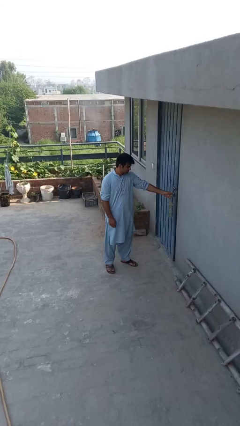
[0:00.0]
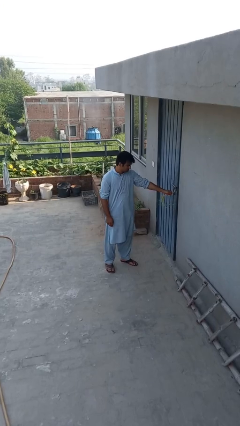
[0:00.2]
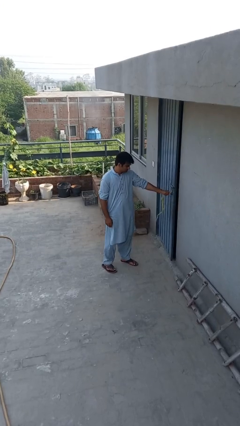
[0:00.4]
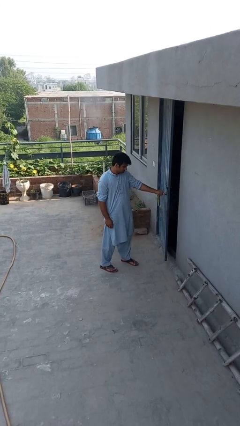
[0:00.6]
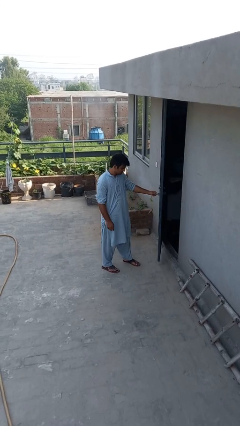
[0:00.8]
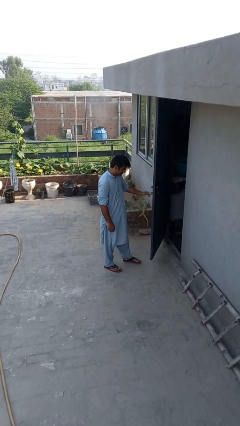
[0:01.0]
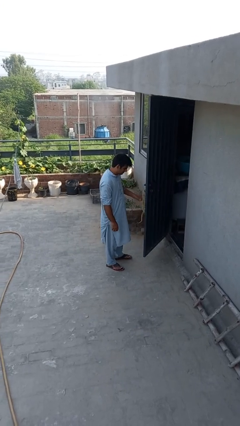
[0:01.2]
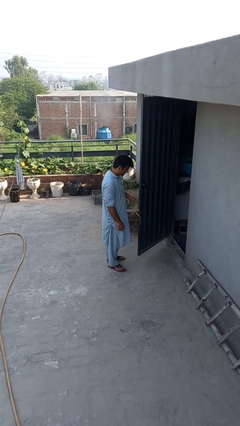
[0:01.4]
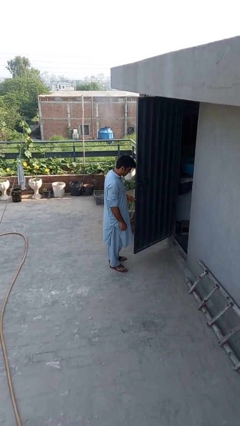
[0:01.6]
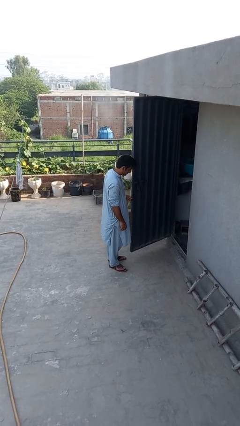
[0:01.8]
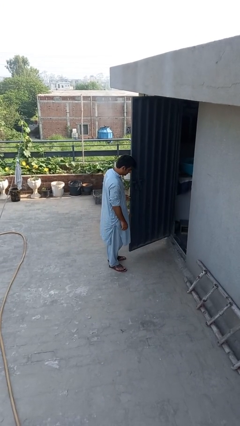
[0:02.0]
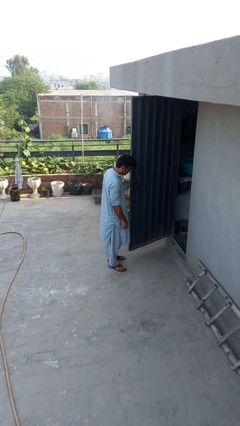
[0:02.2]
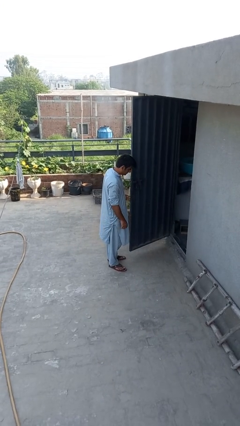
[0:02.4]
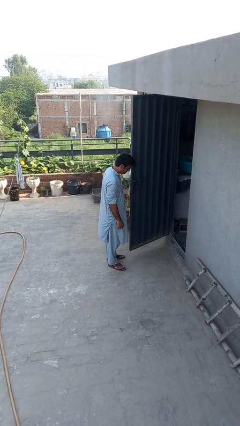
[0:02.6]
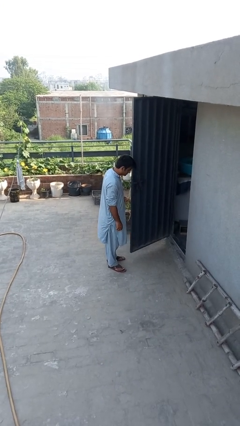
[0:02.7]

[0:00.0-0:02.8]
person opens facility door

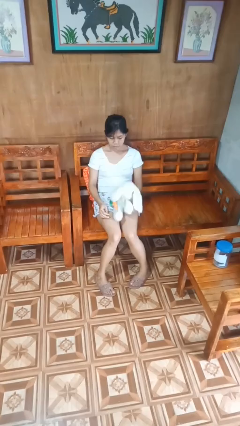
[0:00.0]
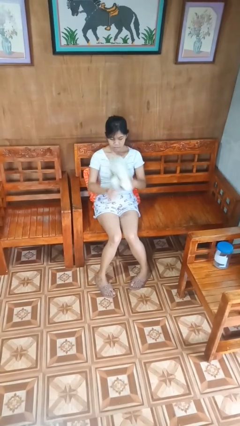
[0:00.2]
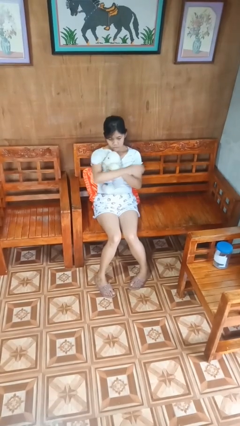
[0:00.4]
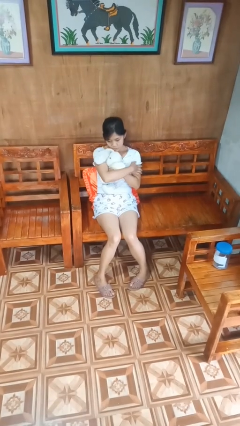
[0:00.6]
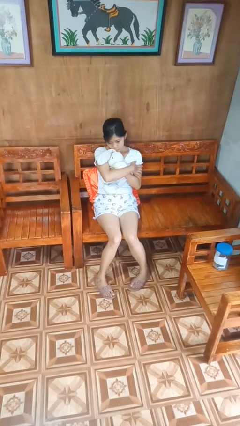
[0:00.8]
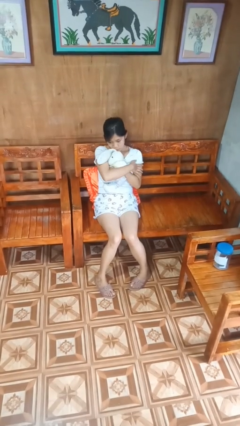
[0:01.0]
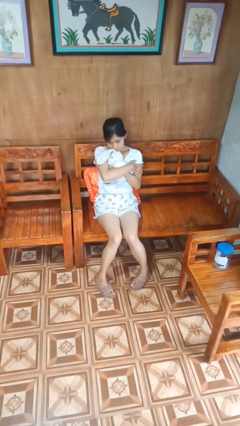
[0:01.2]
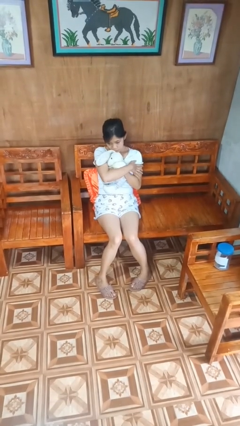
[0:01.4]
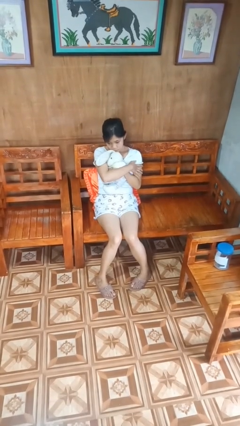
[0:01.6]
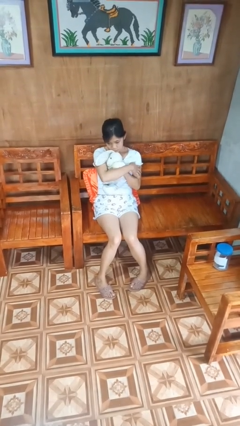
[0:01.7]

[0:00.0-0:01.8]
person hugs stuffed animal

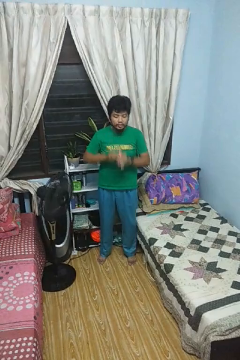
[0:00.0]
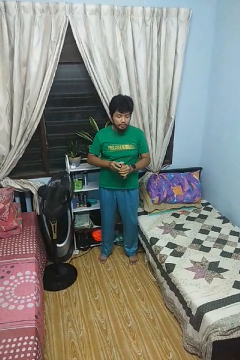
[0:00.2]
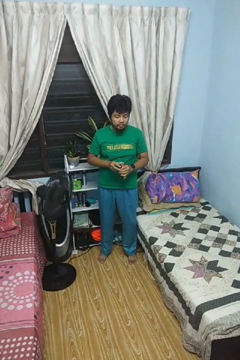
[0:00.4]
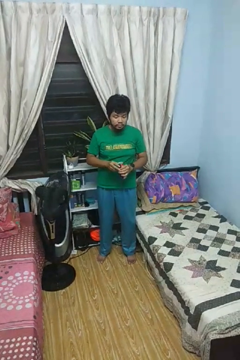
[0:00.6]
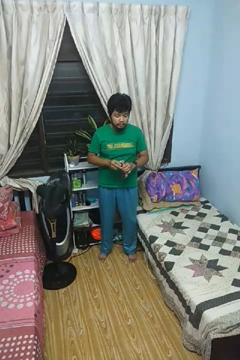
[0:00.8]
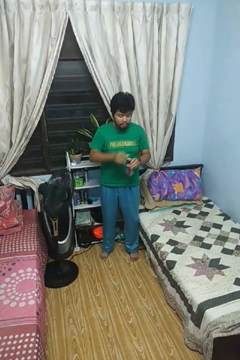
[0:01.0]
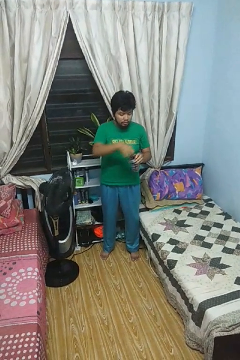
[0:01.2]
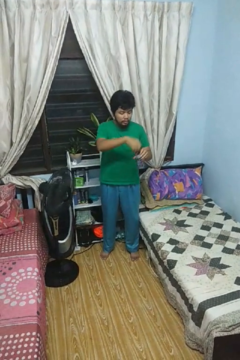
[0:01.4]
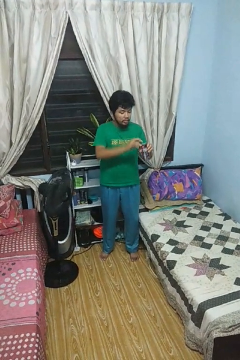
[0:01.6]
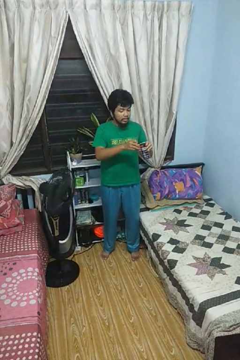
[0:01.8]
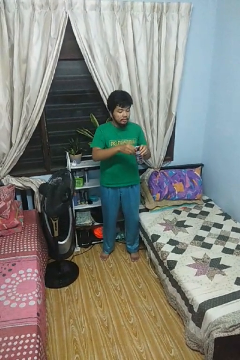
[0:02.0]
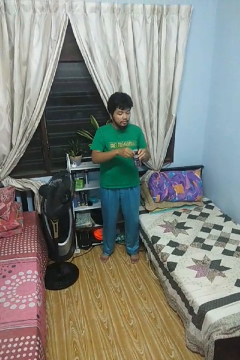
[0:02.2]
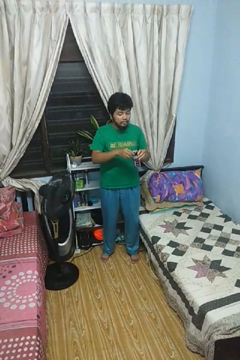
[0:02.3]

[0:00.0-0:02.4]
person opens beverage can

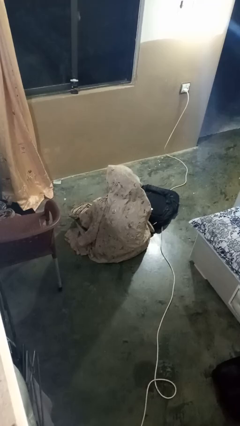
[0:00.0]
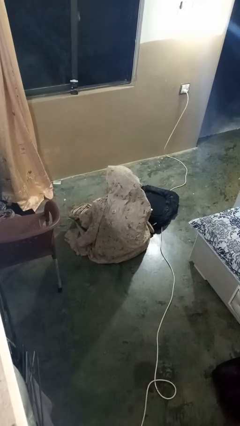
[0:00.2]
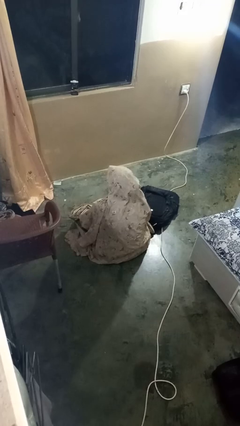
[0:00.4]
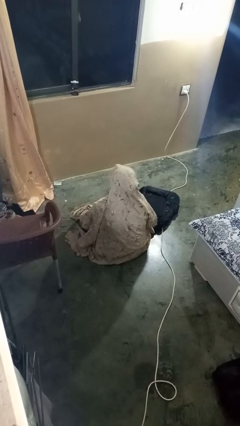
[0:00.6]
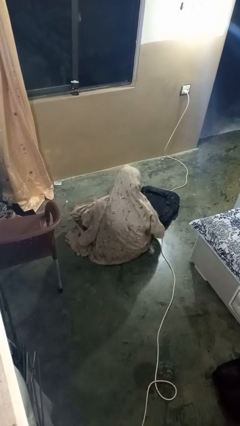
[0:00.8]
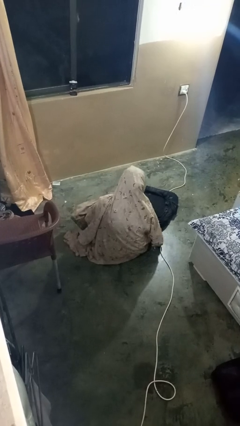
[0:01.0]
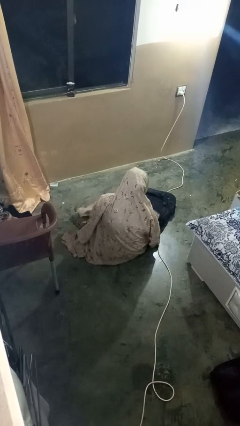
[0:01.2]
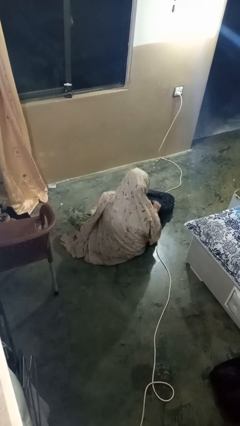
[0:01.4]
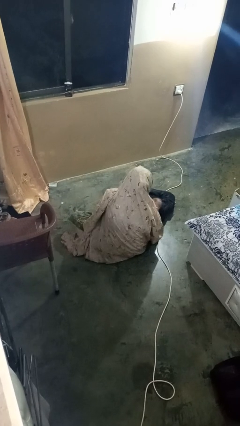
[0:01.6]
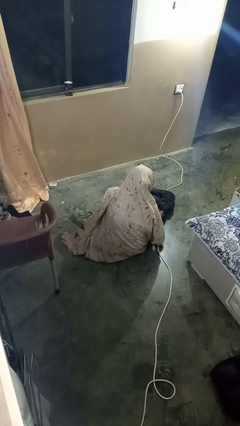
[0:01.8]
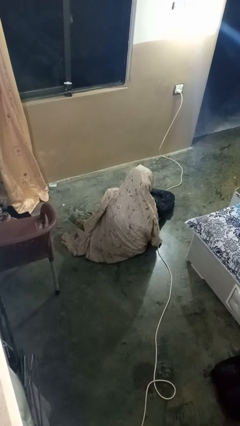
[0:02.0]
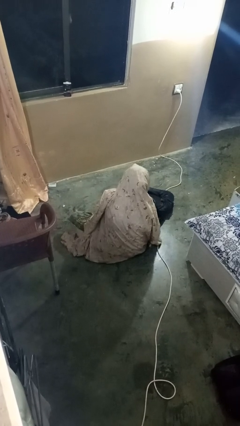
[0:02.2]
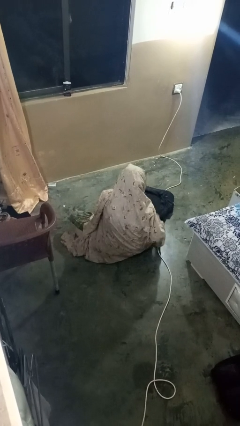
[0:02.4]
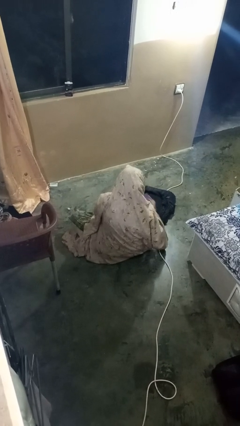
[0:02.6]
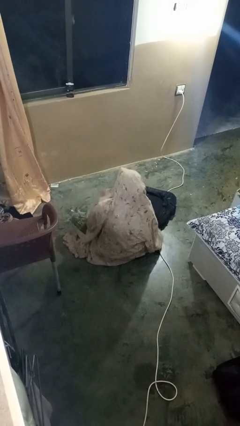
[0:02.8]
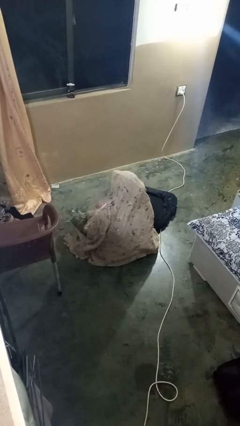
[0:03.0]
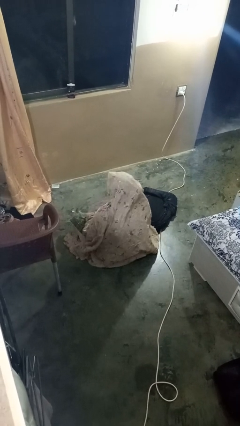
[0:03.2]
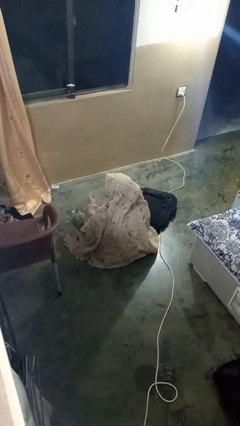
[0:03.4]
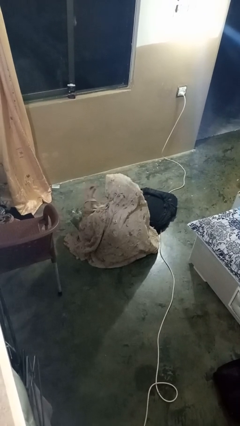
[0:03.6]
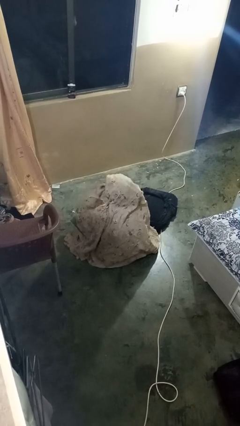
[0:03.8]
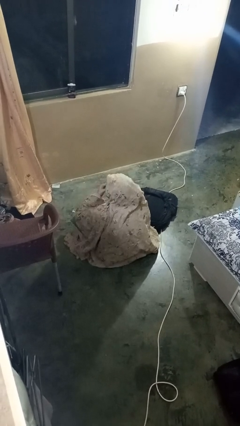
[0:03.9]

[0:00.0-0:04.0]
person eats snack from bag

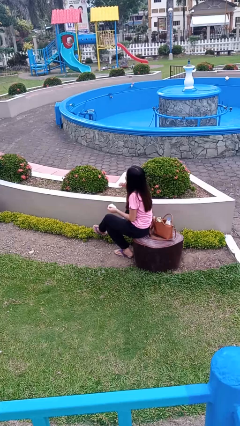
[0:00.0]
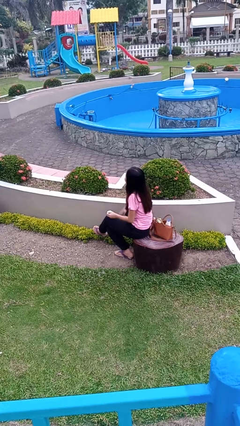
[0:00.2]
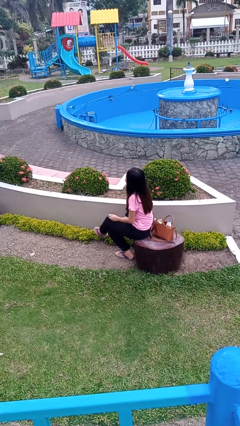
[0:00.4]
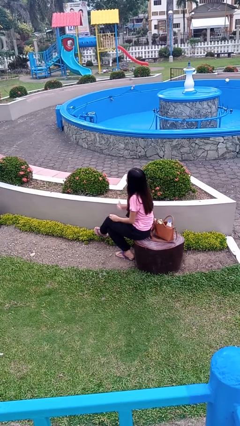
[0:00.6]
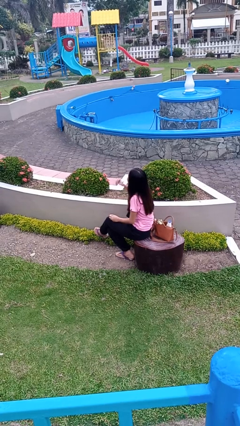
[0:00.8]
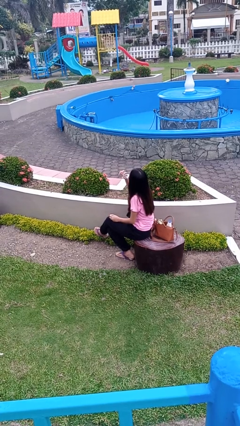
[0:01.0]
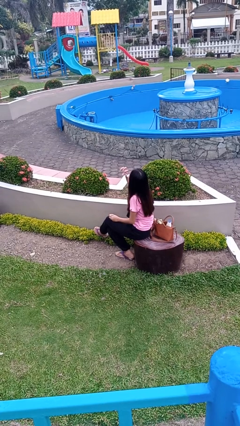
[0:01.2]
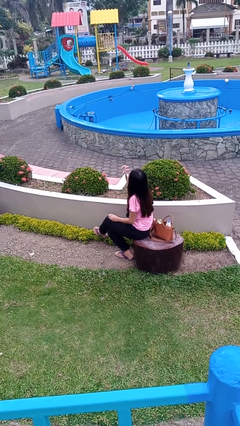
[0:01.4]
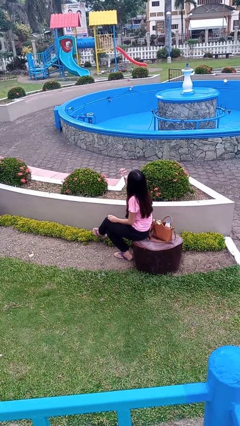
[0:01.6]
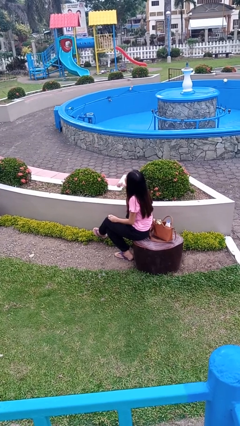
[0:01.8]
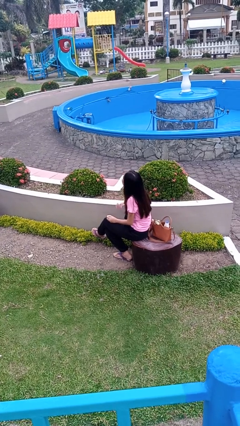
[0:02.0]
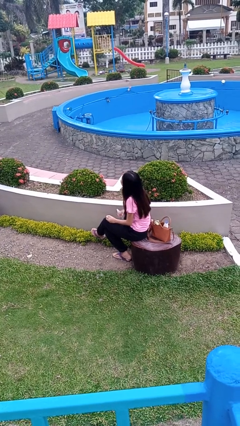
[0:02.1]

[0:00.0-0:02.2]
person drinks from cup

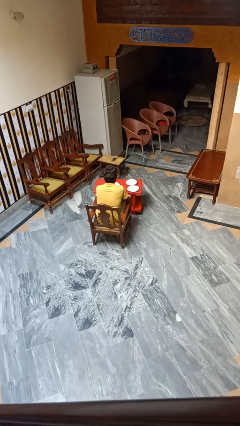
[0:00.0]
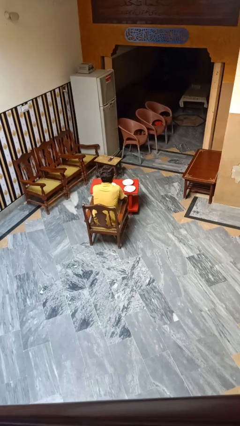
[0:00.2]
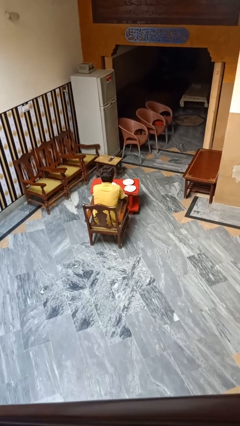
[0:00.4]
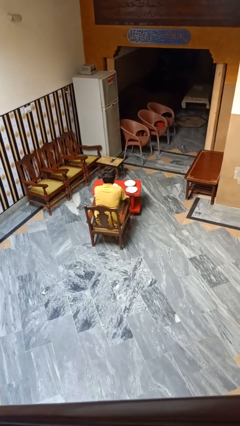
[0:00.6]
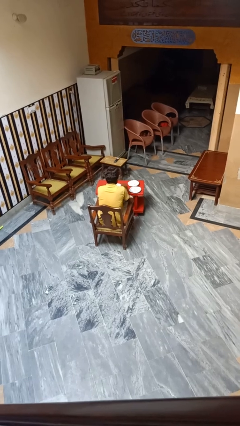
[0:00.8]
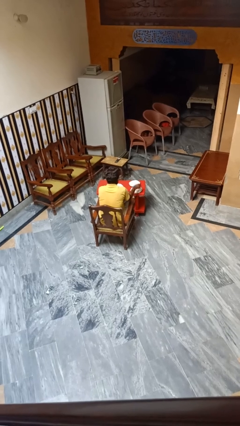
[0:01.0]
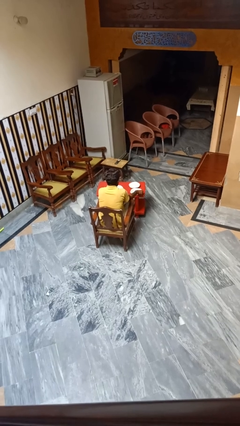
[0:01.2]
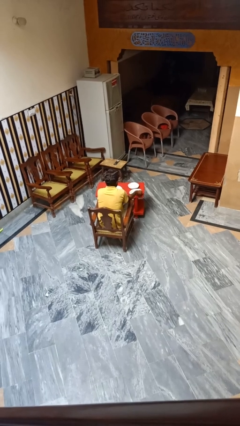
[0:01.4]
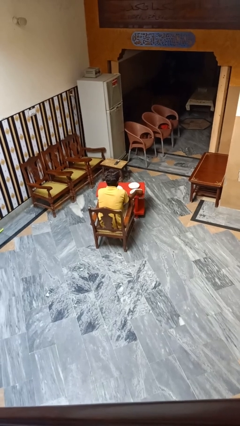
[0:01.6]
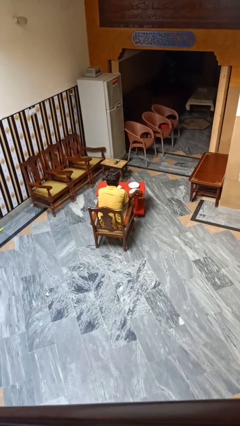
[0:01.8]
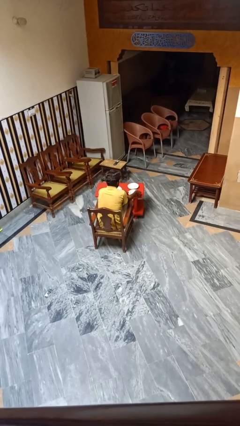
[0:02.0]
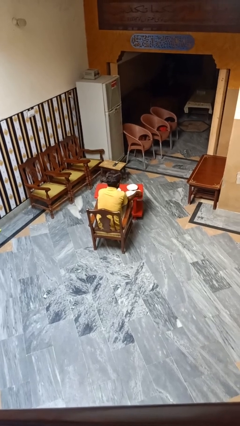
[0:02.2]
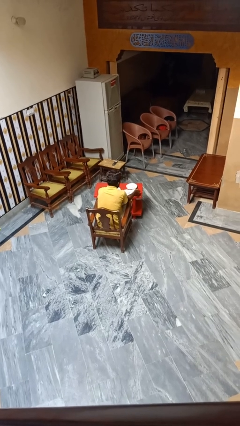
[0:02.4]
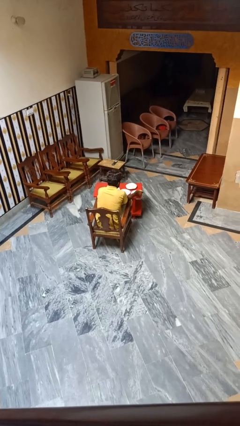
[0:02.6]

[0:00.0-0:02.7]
person sets table

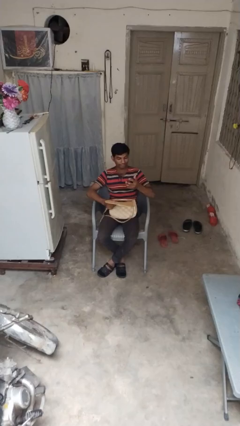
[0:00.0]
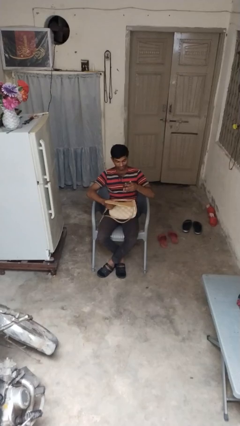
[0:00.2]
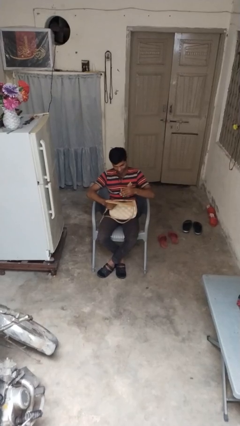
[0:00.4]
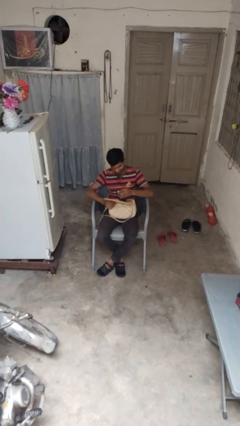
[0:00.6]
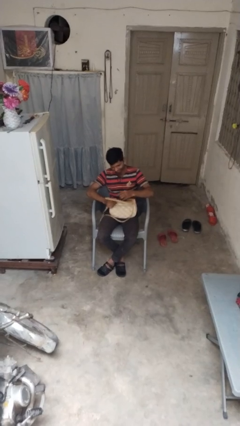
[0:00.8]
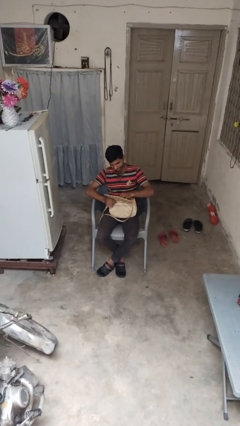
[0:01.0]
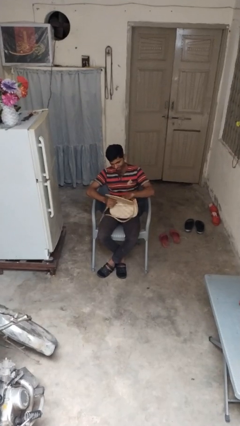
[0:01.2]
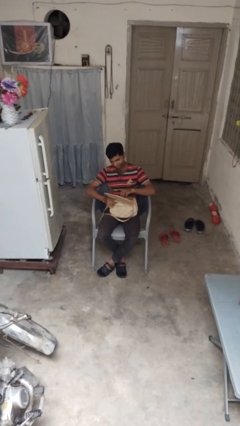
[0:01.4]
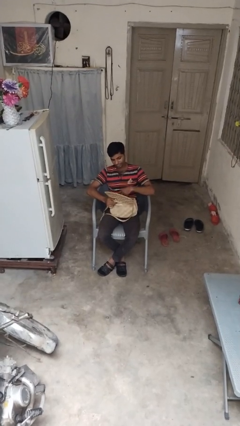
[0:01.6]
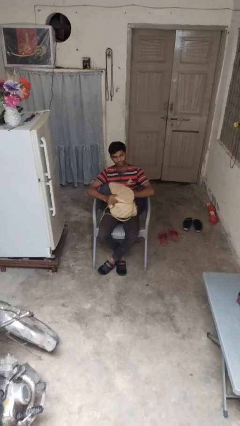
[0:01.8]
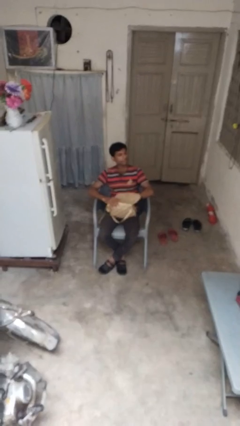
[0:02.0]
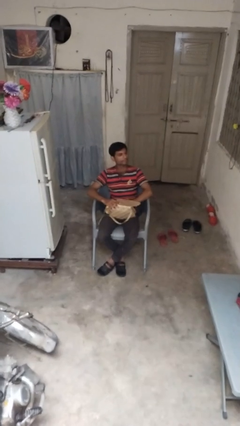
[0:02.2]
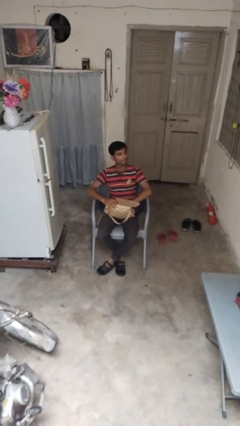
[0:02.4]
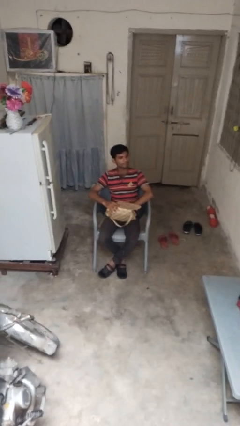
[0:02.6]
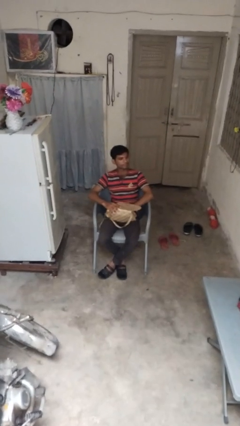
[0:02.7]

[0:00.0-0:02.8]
person puts object into purse
